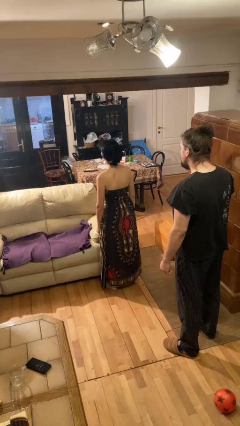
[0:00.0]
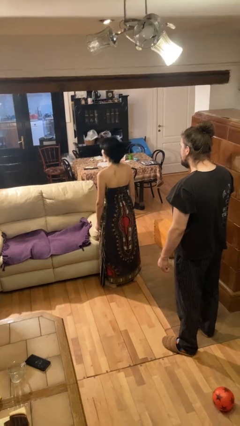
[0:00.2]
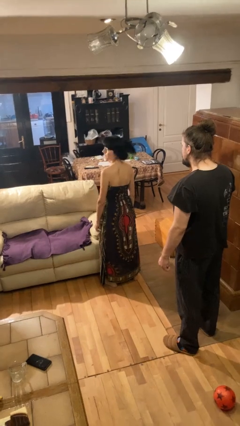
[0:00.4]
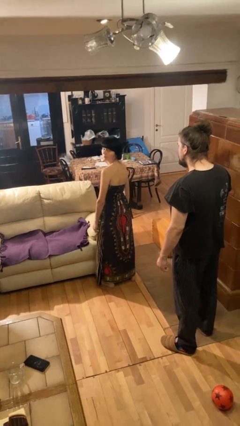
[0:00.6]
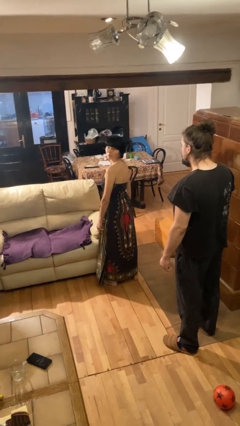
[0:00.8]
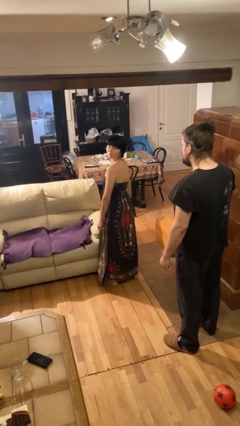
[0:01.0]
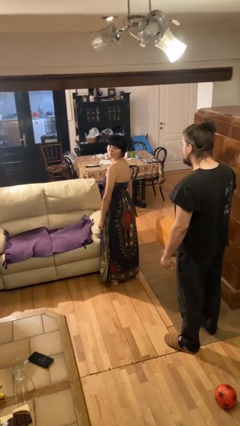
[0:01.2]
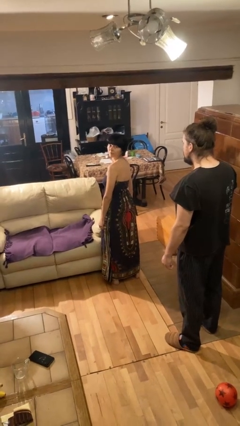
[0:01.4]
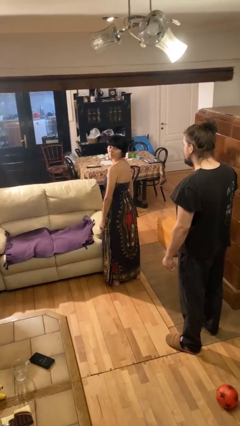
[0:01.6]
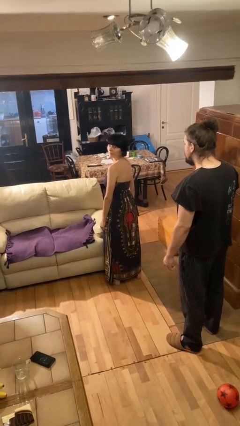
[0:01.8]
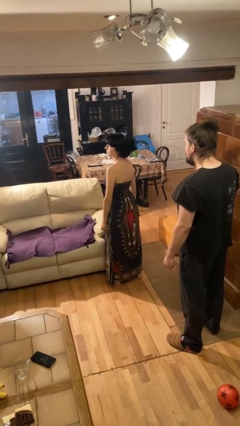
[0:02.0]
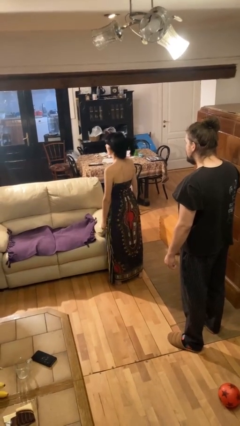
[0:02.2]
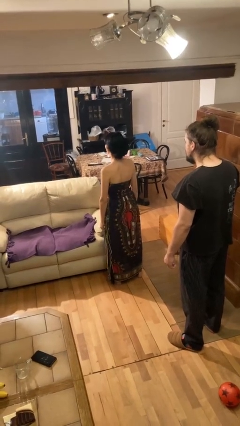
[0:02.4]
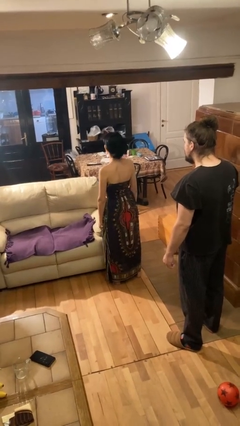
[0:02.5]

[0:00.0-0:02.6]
person looks over shoulder

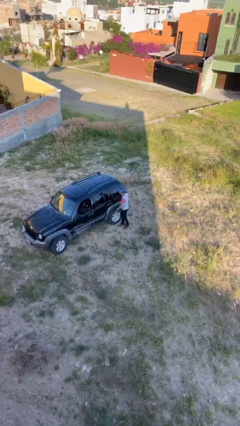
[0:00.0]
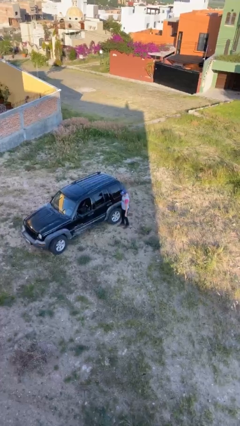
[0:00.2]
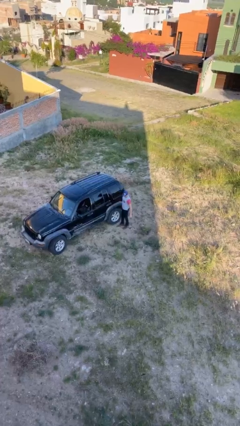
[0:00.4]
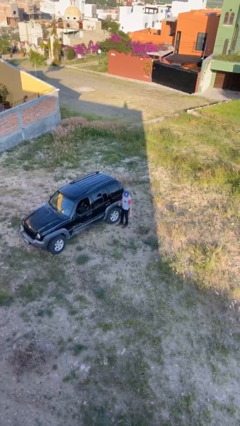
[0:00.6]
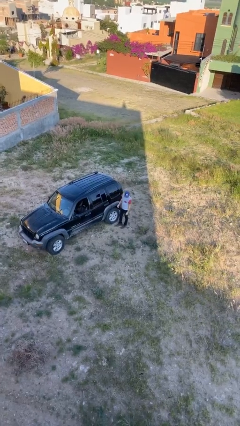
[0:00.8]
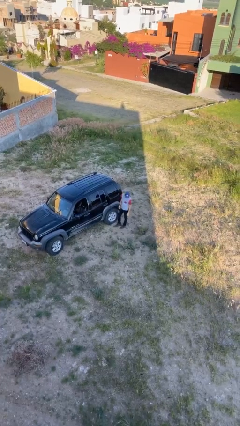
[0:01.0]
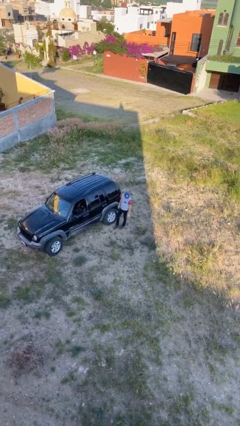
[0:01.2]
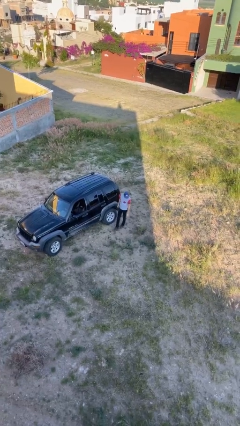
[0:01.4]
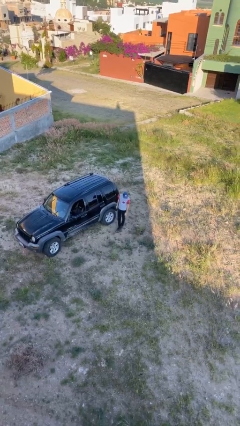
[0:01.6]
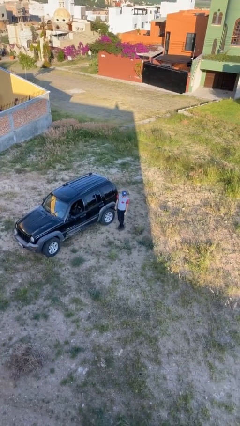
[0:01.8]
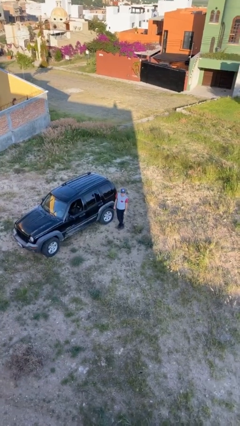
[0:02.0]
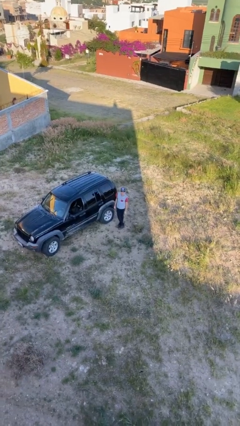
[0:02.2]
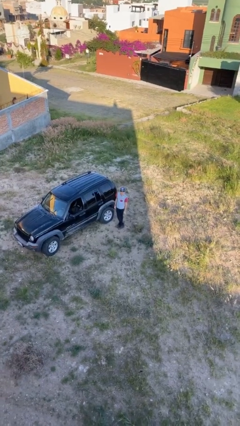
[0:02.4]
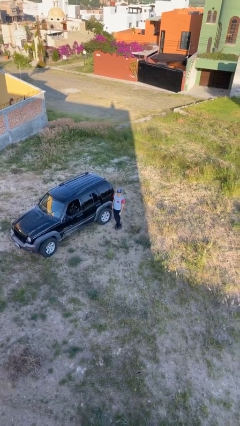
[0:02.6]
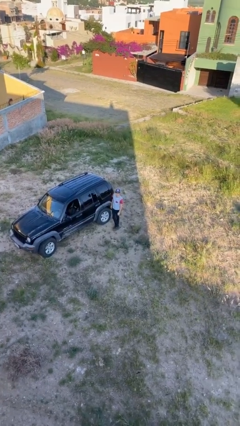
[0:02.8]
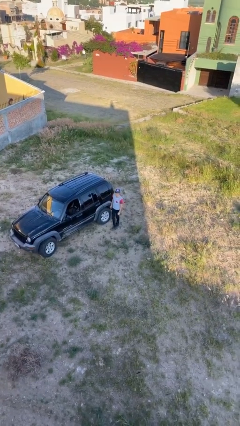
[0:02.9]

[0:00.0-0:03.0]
person closes car door

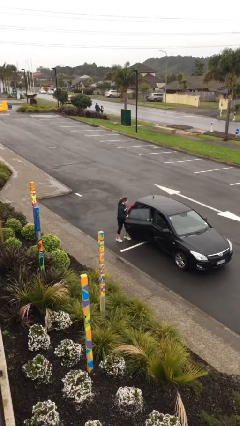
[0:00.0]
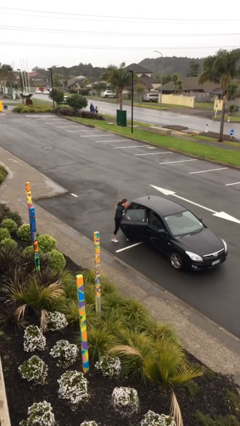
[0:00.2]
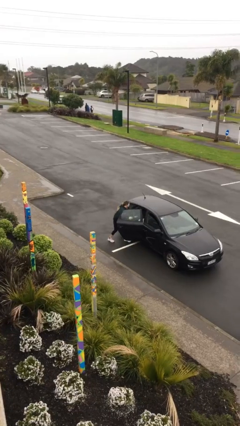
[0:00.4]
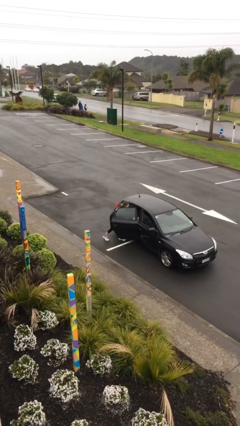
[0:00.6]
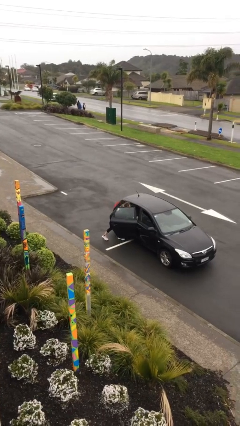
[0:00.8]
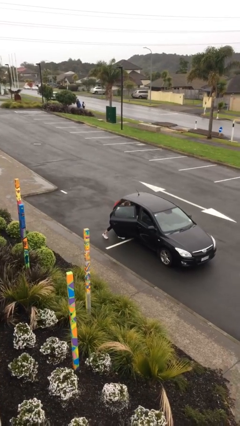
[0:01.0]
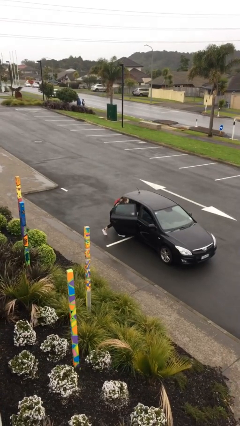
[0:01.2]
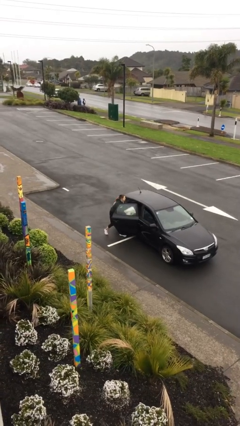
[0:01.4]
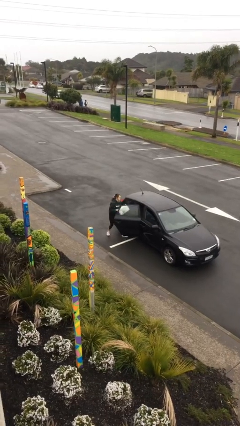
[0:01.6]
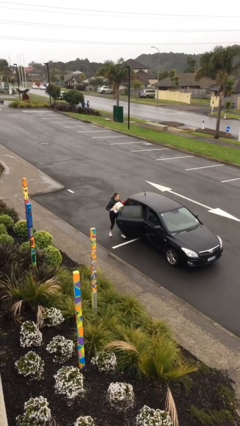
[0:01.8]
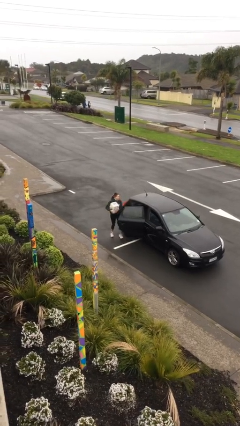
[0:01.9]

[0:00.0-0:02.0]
person unloads car

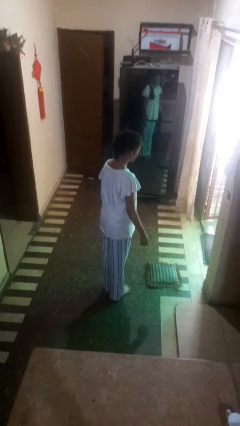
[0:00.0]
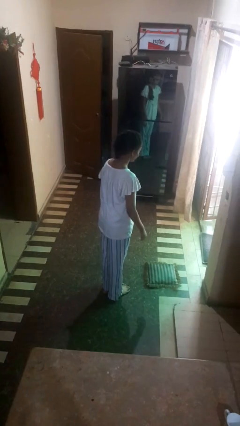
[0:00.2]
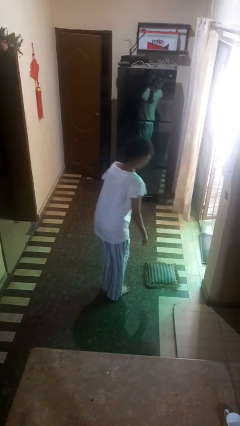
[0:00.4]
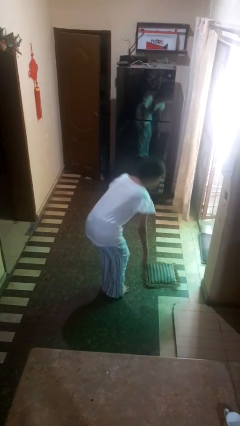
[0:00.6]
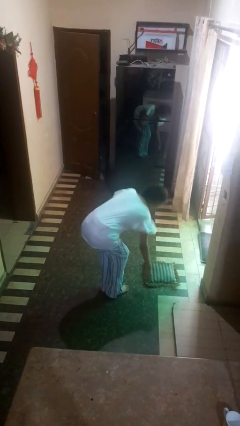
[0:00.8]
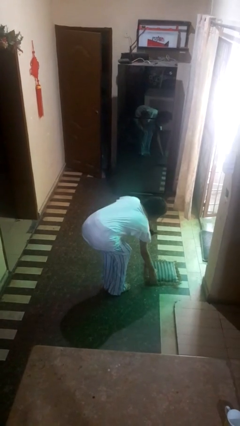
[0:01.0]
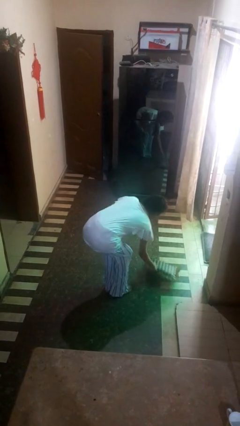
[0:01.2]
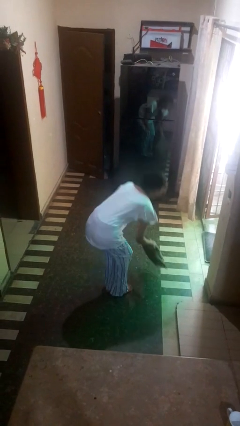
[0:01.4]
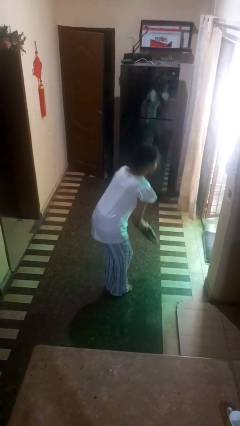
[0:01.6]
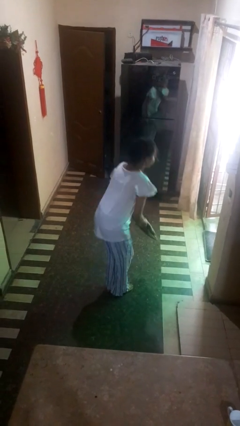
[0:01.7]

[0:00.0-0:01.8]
person picks up object from floor

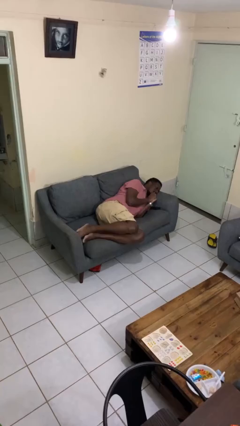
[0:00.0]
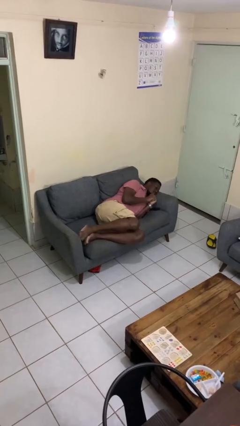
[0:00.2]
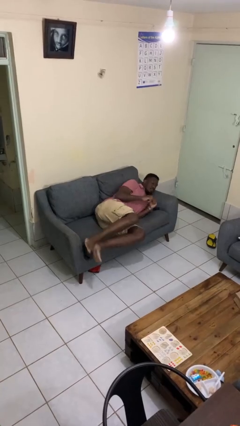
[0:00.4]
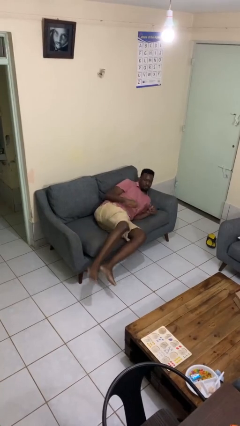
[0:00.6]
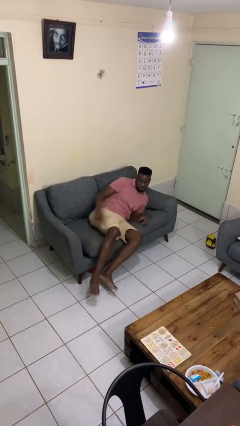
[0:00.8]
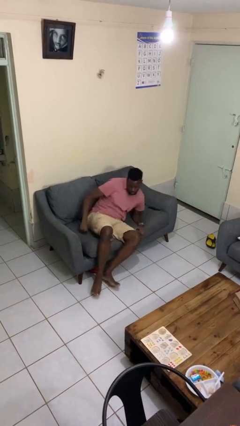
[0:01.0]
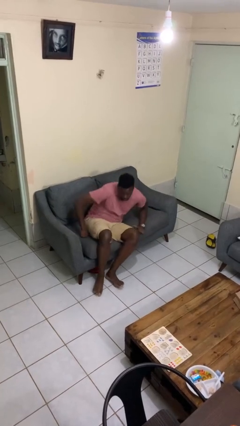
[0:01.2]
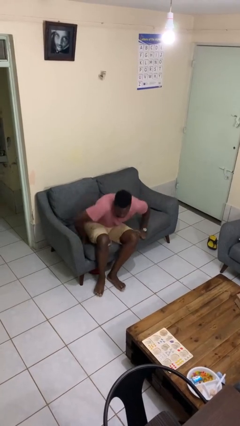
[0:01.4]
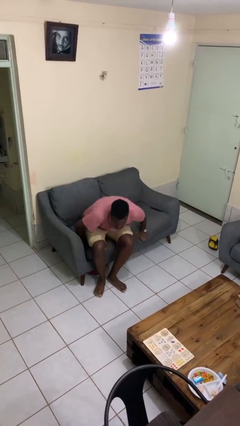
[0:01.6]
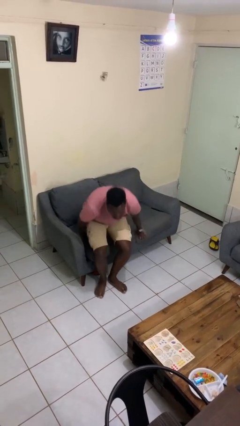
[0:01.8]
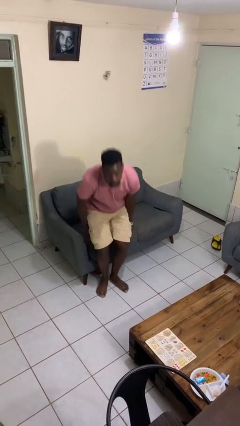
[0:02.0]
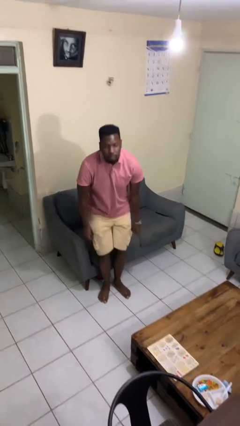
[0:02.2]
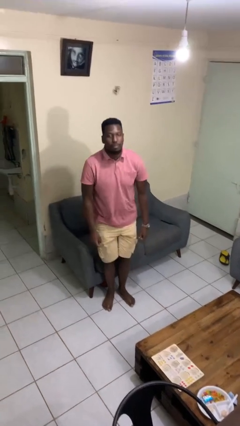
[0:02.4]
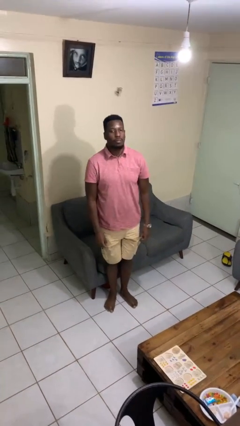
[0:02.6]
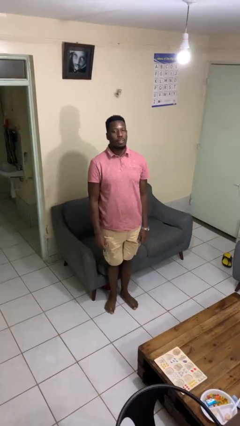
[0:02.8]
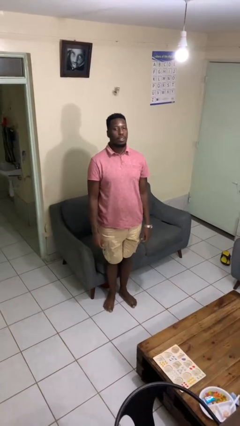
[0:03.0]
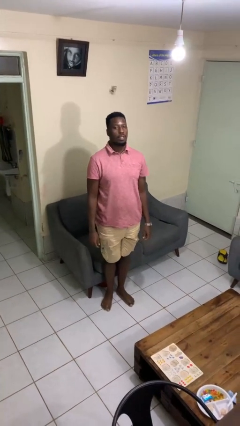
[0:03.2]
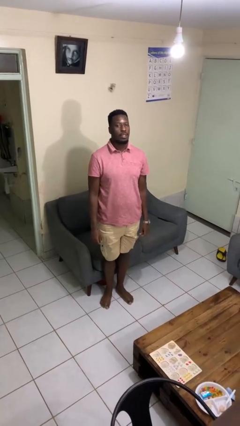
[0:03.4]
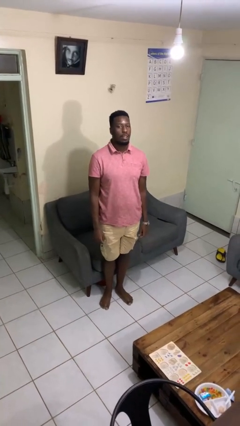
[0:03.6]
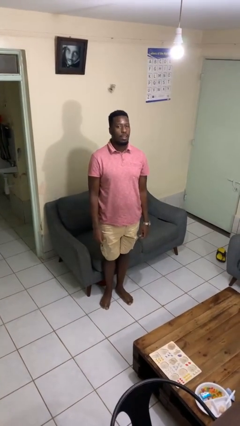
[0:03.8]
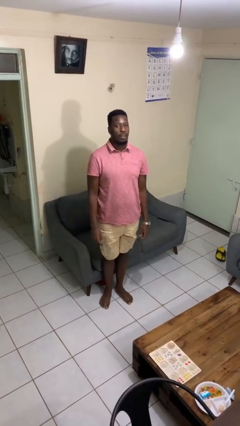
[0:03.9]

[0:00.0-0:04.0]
person stands up

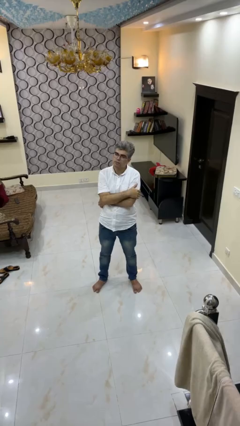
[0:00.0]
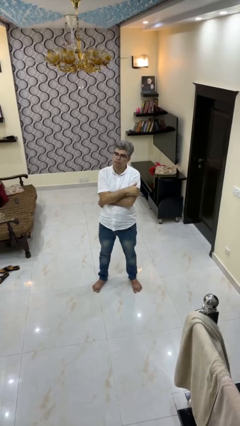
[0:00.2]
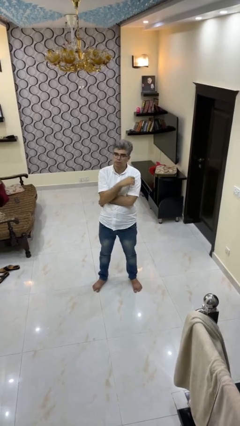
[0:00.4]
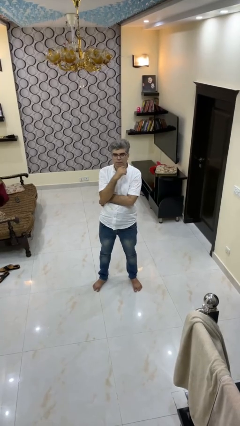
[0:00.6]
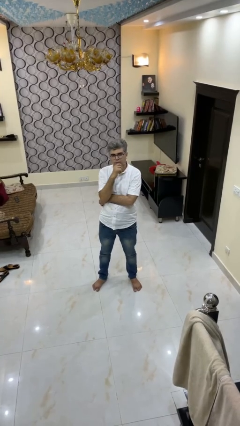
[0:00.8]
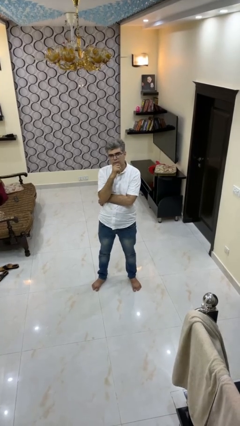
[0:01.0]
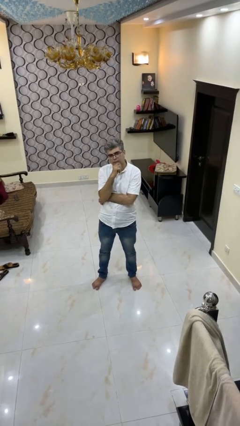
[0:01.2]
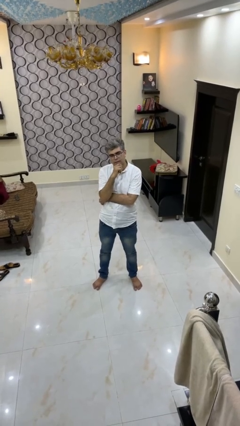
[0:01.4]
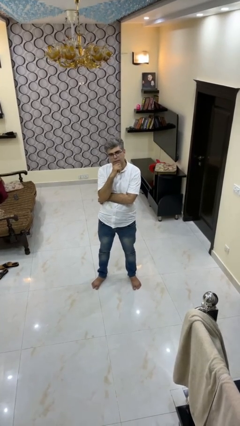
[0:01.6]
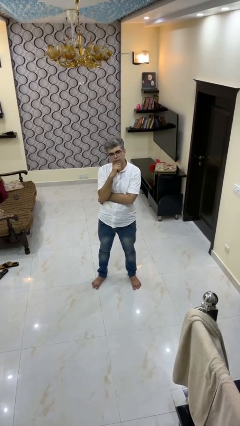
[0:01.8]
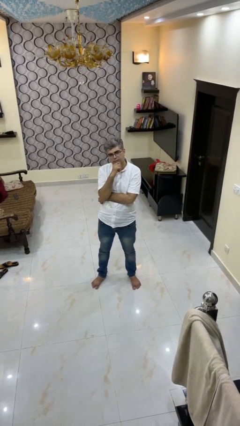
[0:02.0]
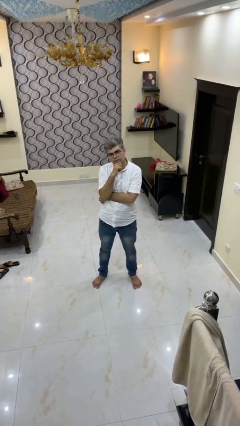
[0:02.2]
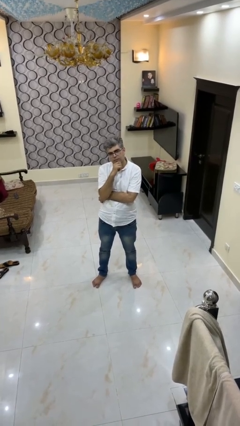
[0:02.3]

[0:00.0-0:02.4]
person strokes chin

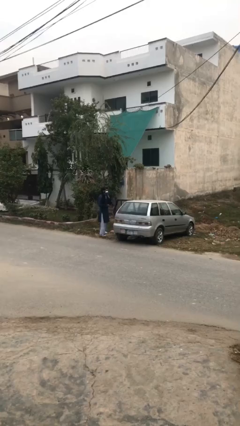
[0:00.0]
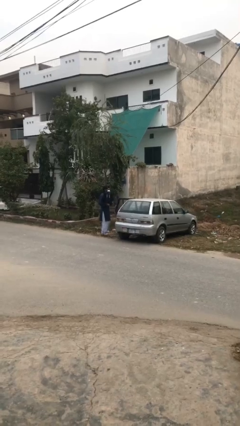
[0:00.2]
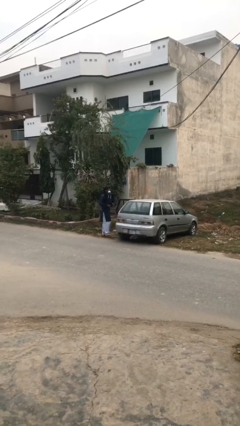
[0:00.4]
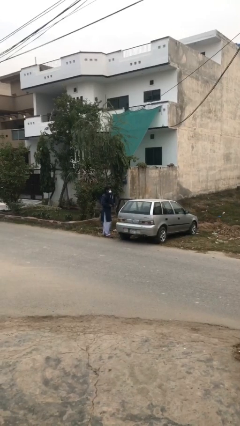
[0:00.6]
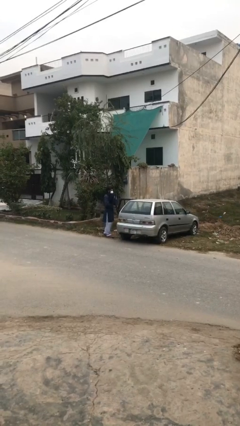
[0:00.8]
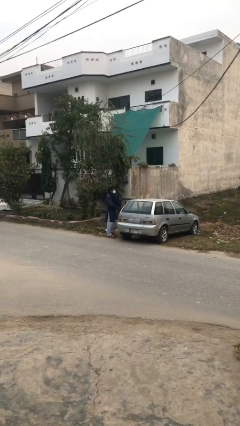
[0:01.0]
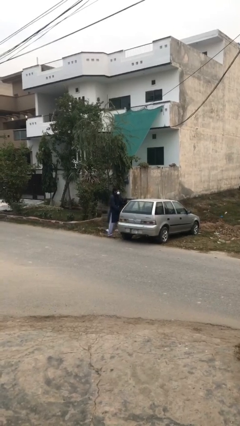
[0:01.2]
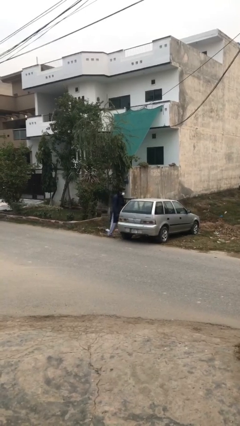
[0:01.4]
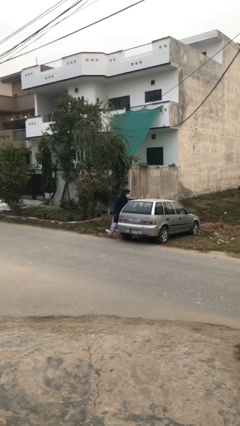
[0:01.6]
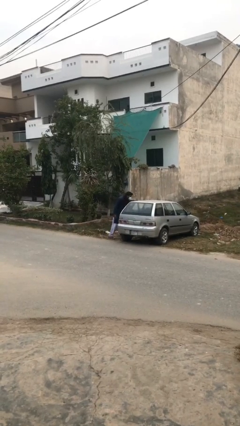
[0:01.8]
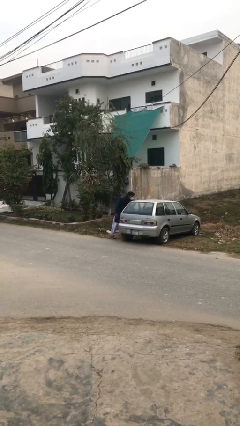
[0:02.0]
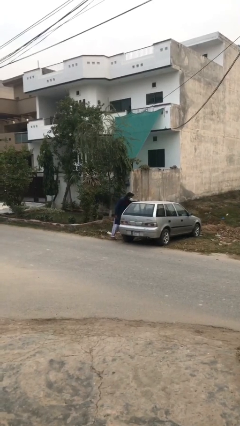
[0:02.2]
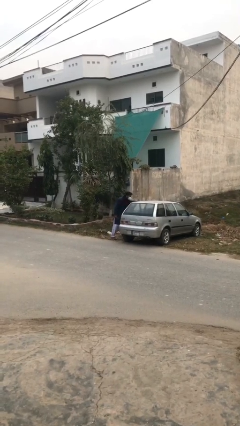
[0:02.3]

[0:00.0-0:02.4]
person loads car
